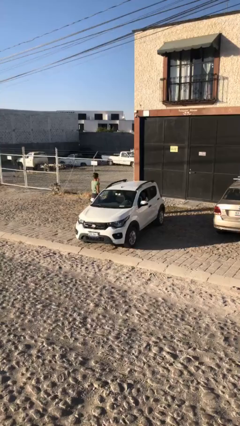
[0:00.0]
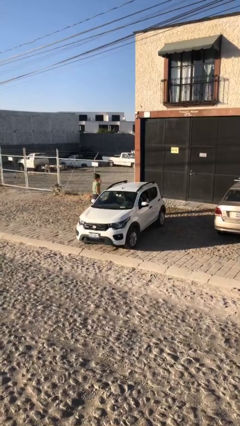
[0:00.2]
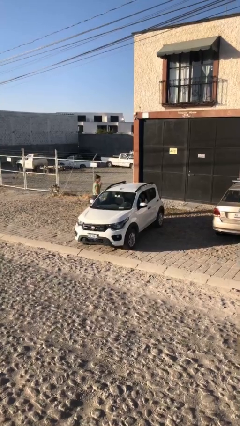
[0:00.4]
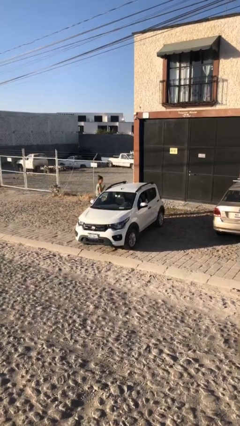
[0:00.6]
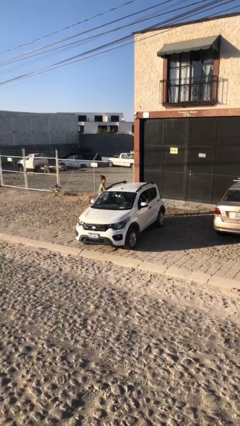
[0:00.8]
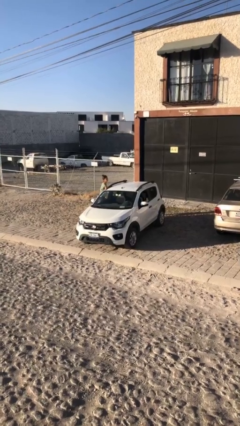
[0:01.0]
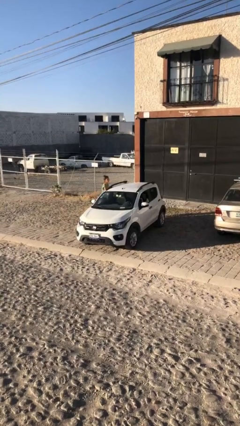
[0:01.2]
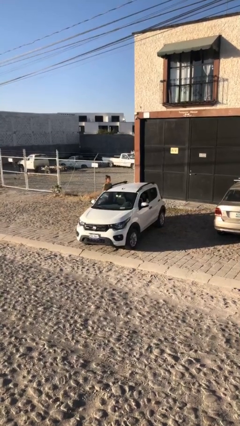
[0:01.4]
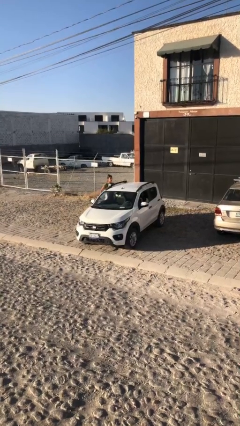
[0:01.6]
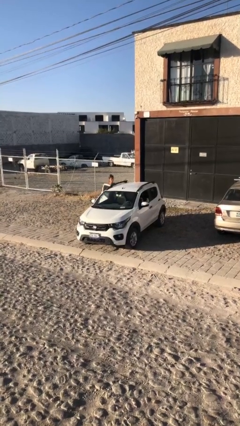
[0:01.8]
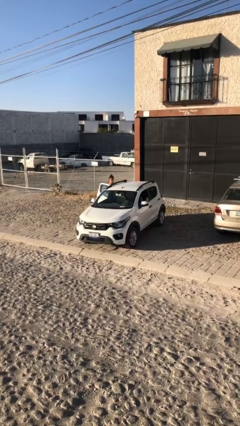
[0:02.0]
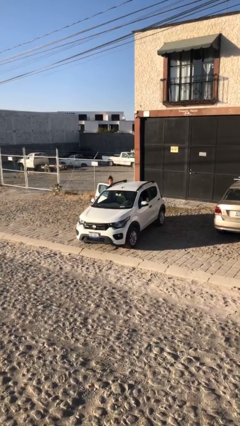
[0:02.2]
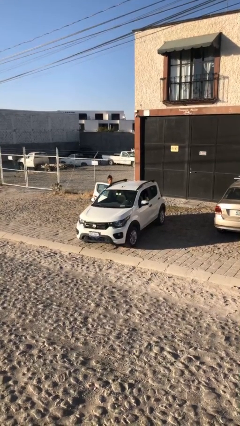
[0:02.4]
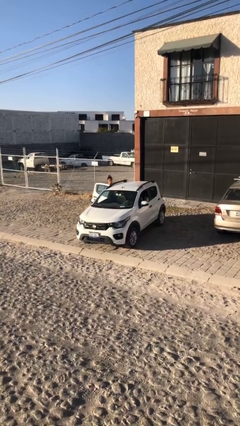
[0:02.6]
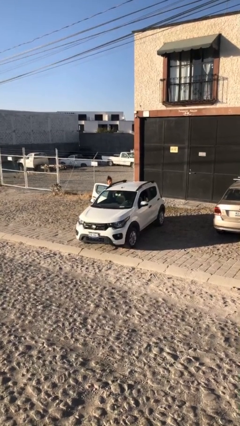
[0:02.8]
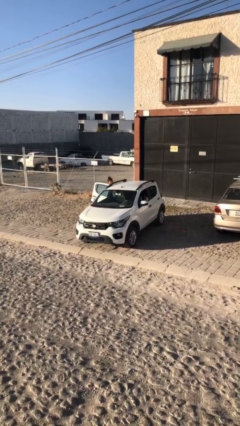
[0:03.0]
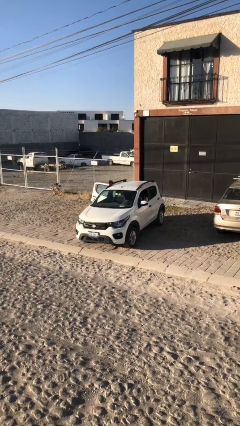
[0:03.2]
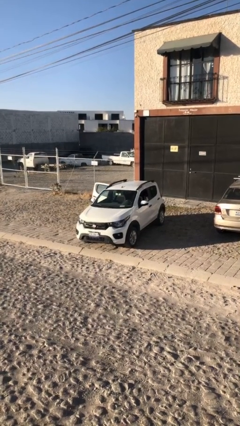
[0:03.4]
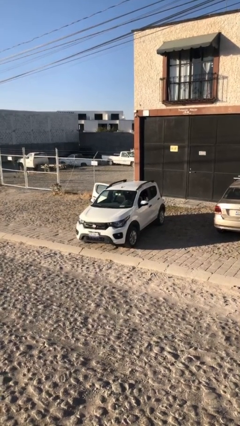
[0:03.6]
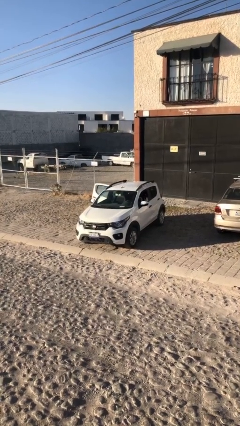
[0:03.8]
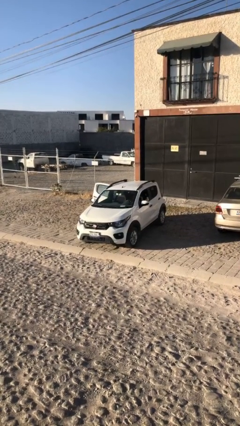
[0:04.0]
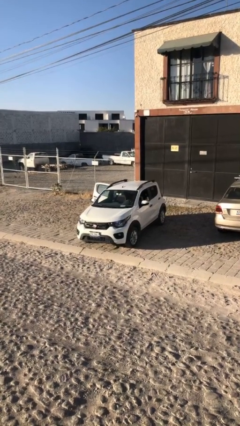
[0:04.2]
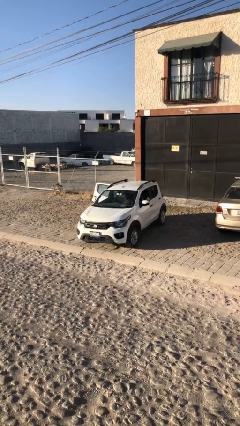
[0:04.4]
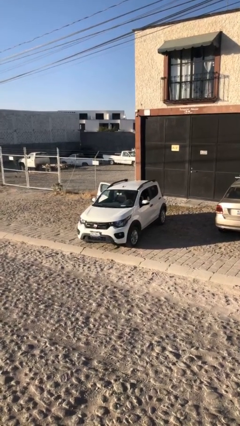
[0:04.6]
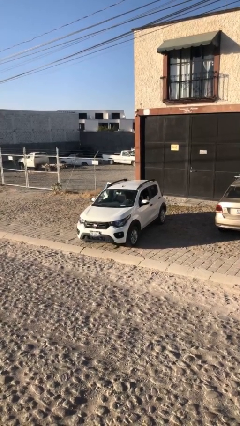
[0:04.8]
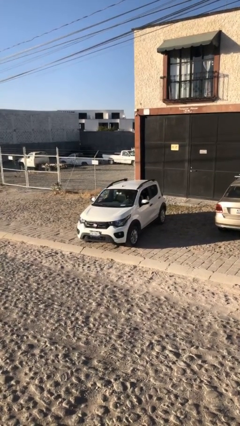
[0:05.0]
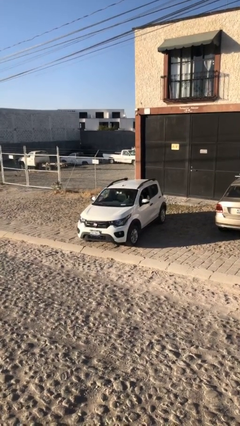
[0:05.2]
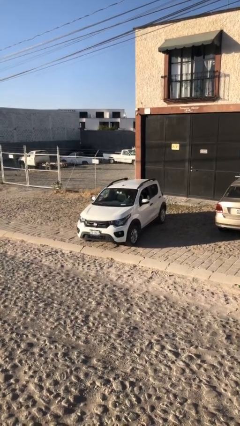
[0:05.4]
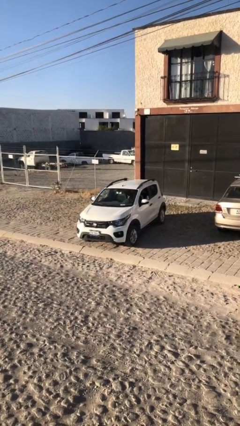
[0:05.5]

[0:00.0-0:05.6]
car picks up person

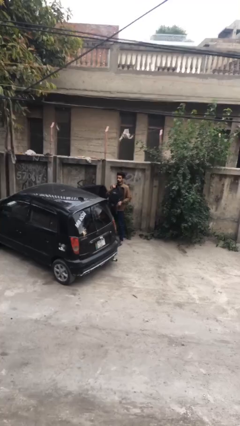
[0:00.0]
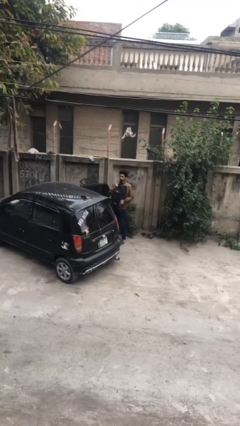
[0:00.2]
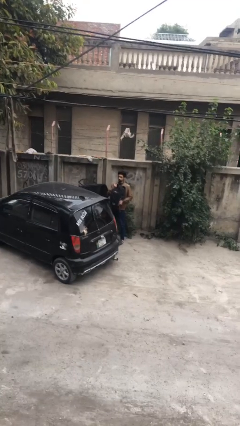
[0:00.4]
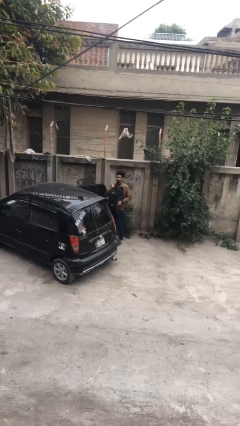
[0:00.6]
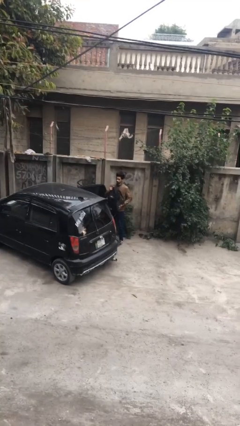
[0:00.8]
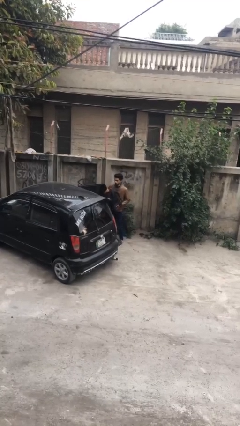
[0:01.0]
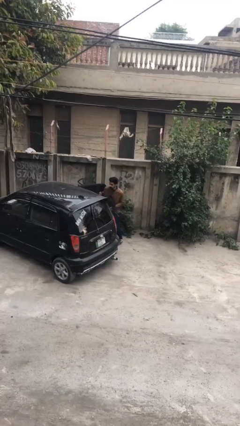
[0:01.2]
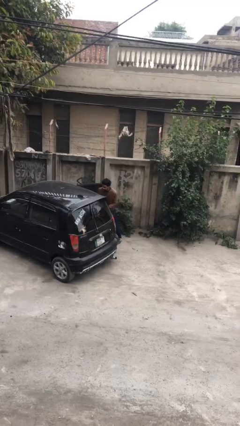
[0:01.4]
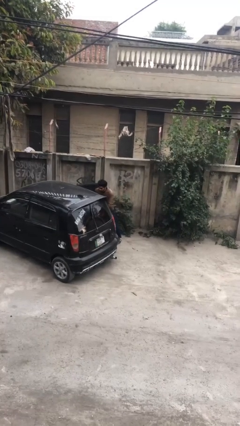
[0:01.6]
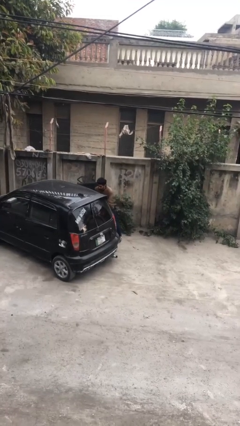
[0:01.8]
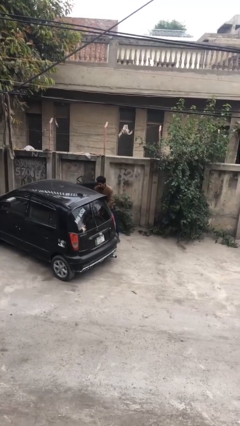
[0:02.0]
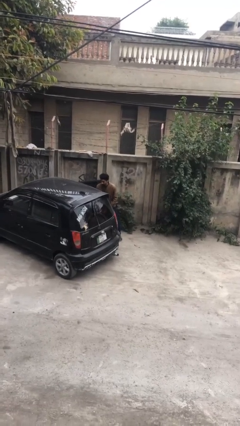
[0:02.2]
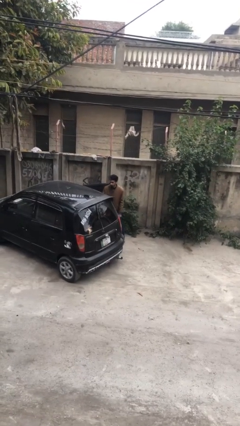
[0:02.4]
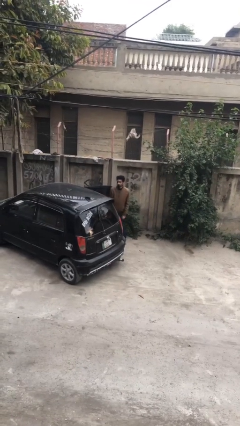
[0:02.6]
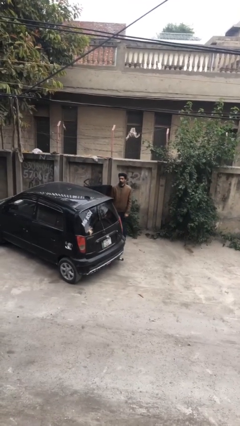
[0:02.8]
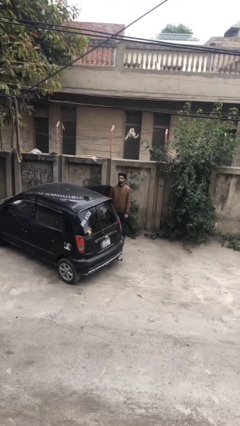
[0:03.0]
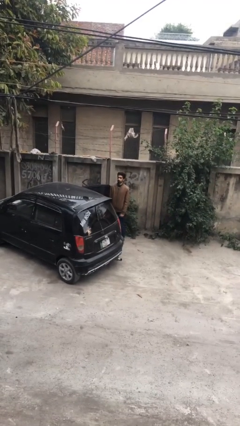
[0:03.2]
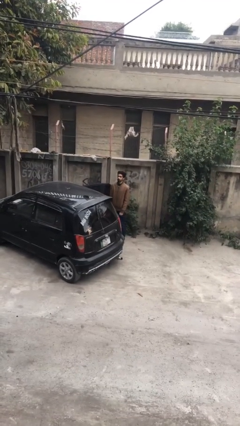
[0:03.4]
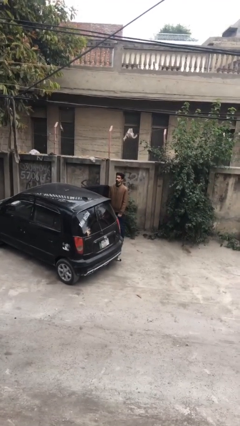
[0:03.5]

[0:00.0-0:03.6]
person loads car

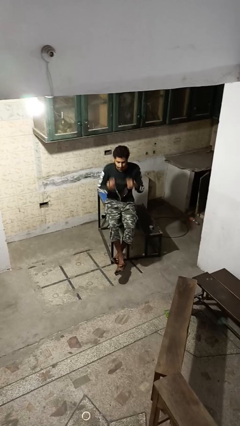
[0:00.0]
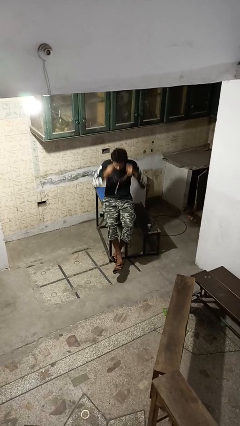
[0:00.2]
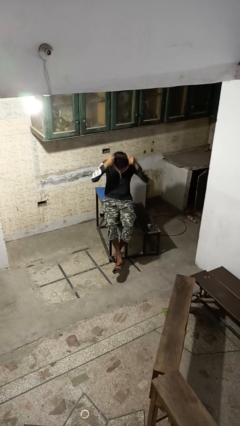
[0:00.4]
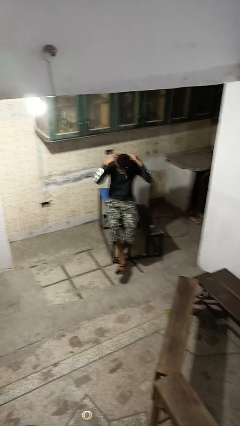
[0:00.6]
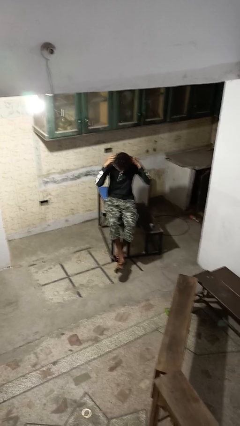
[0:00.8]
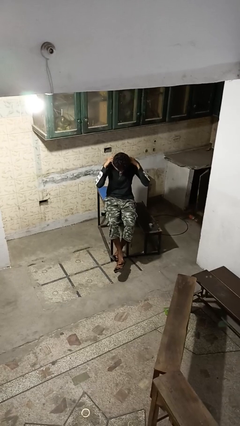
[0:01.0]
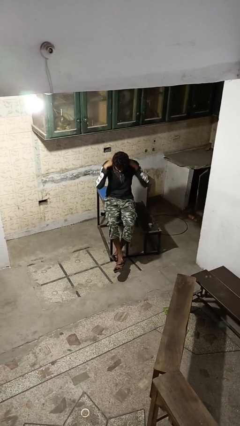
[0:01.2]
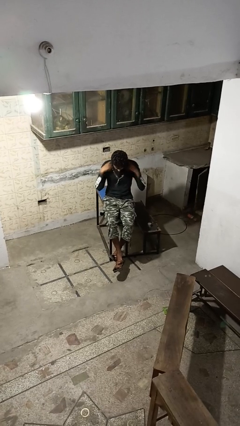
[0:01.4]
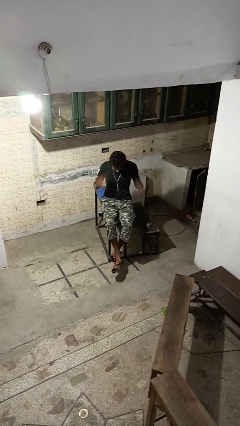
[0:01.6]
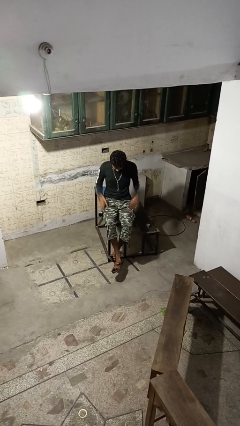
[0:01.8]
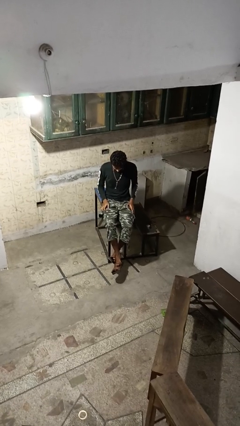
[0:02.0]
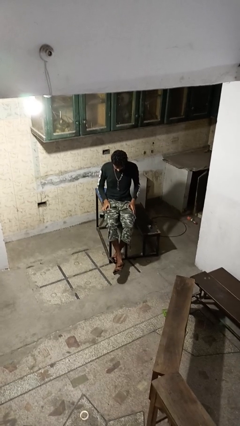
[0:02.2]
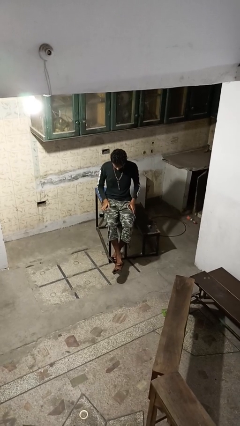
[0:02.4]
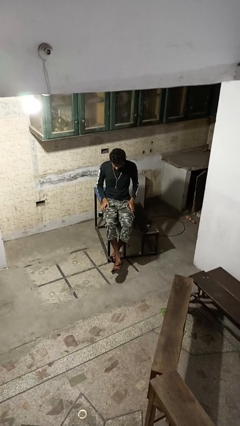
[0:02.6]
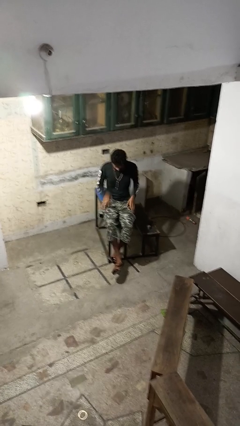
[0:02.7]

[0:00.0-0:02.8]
person puts on necklace

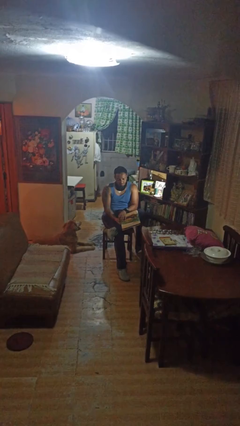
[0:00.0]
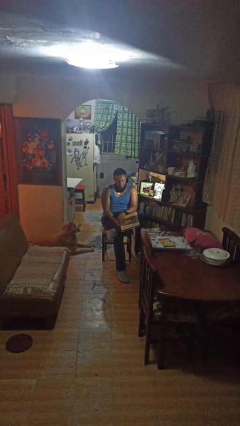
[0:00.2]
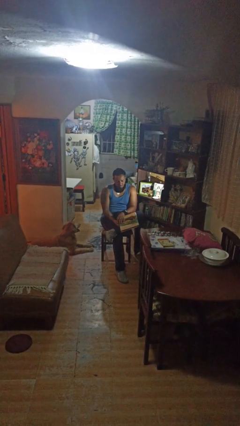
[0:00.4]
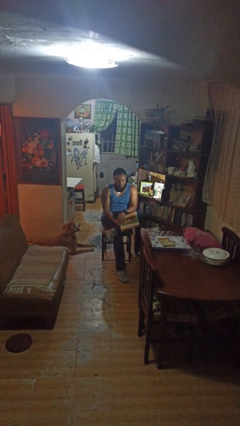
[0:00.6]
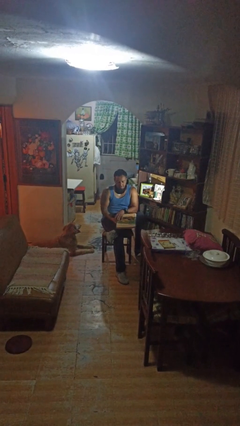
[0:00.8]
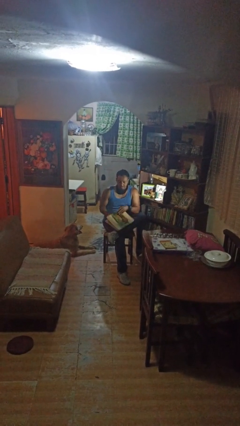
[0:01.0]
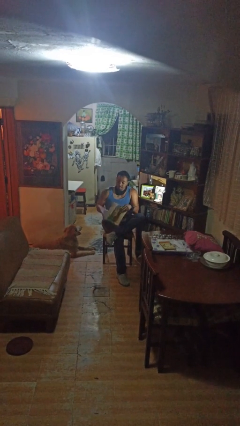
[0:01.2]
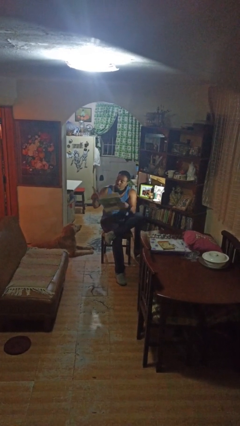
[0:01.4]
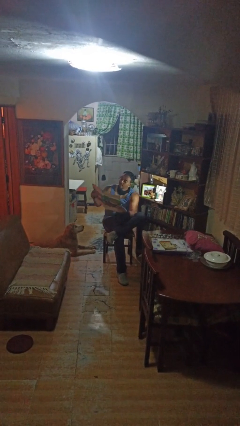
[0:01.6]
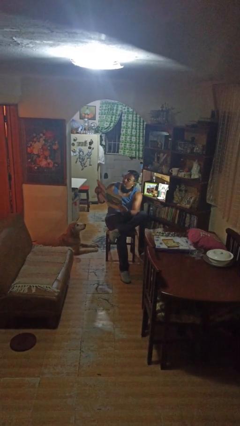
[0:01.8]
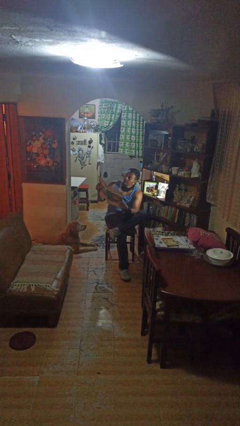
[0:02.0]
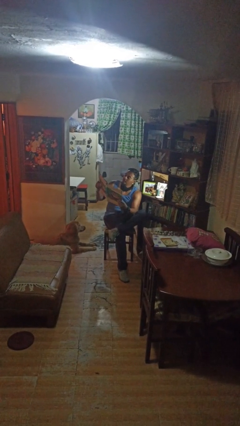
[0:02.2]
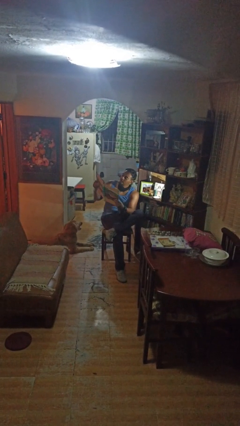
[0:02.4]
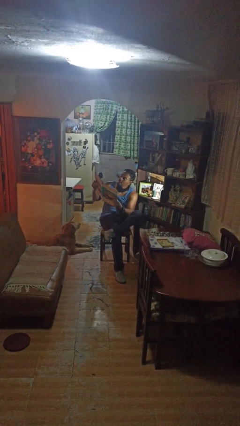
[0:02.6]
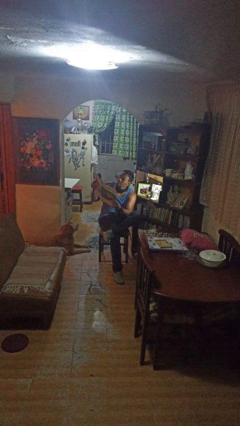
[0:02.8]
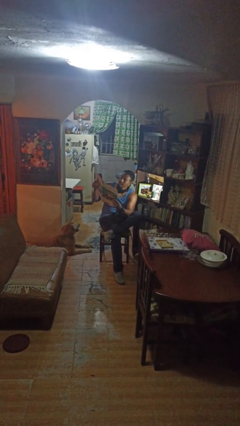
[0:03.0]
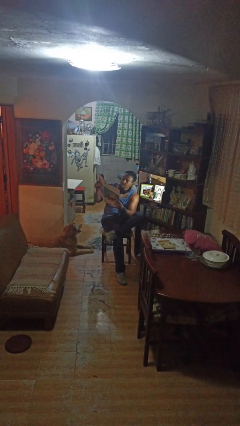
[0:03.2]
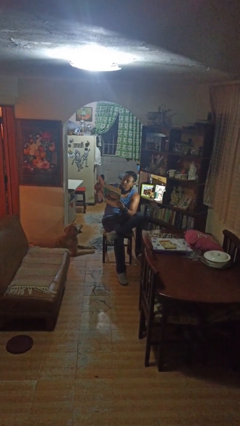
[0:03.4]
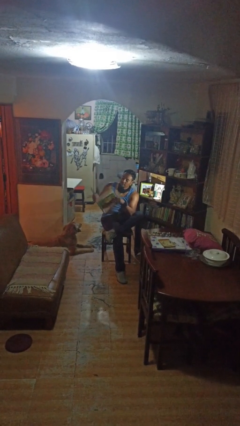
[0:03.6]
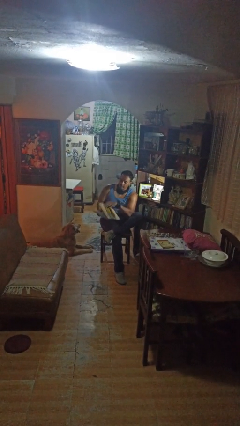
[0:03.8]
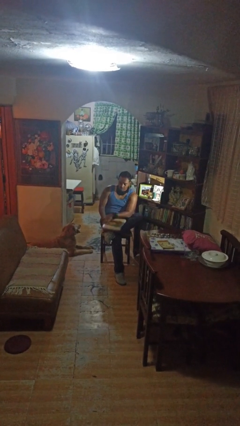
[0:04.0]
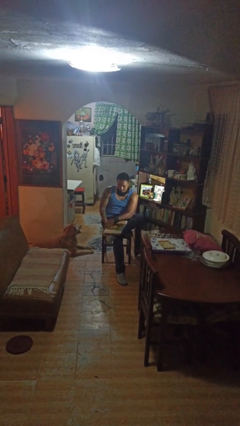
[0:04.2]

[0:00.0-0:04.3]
person reads document

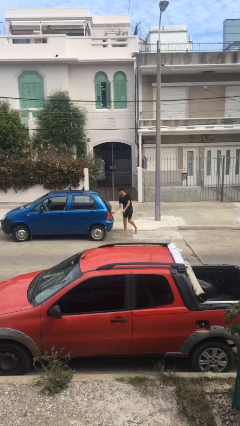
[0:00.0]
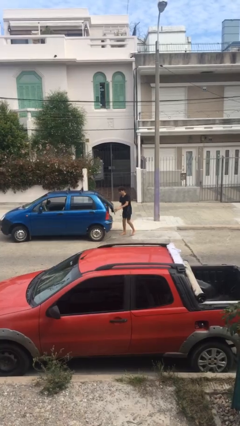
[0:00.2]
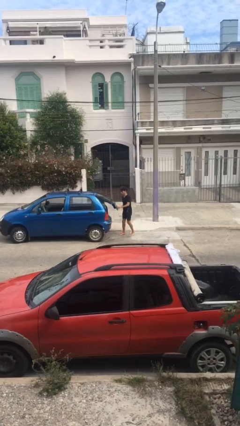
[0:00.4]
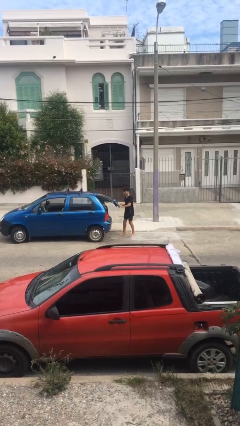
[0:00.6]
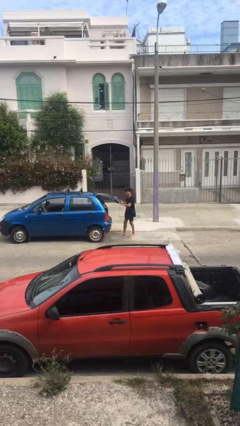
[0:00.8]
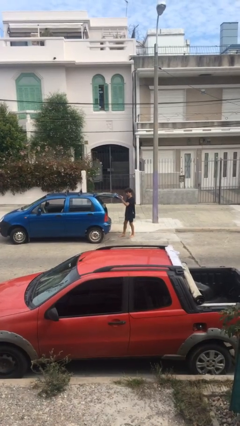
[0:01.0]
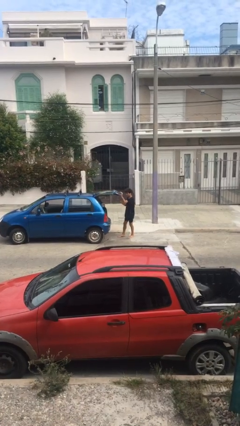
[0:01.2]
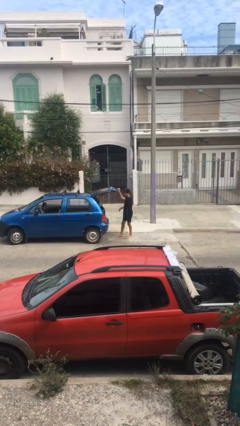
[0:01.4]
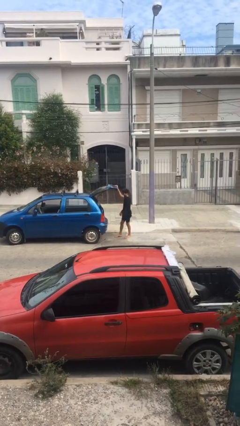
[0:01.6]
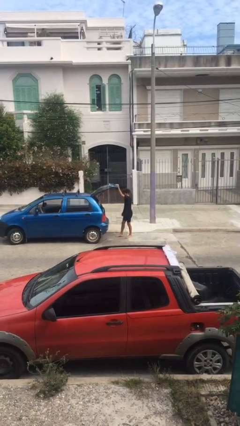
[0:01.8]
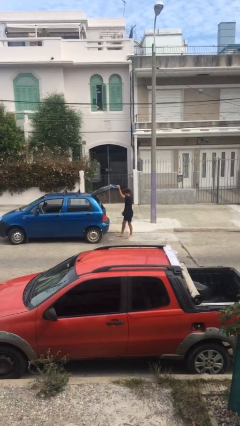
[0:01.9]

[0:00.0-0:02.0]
person opens car trunk
